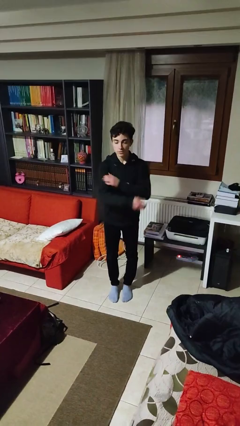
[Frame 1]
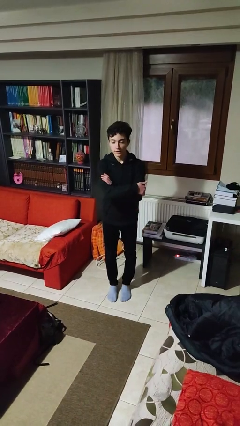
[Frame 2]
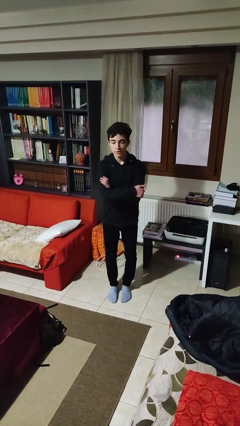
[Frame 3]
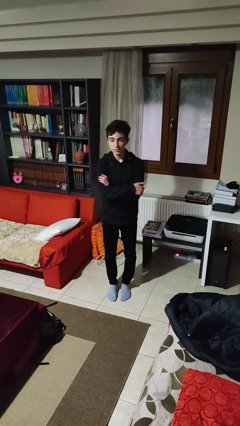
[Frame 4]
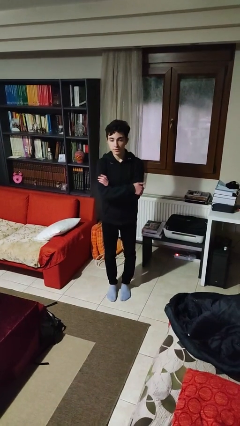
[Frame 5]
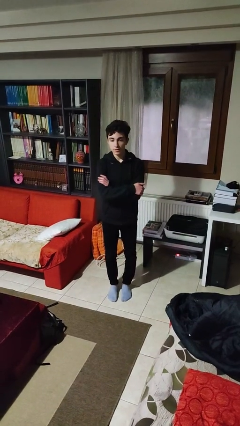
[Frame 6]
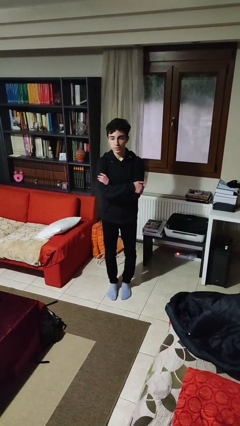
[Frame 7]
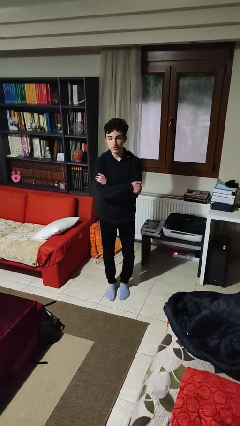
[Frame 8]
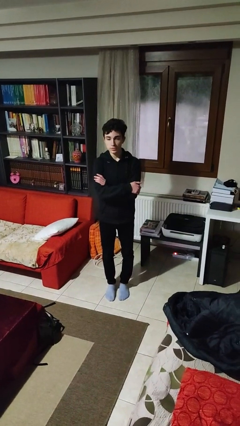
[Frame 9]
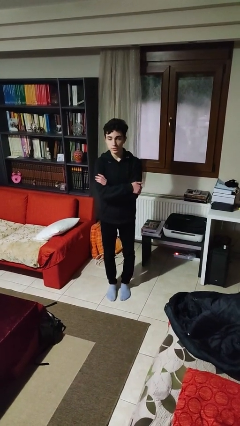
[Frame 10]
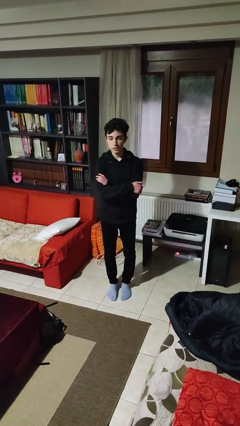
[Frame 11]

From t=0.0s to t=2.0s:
person crosses arms

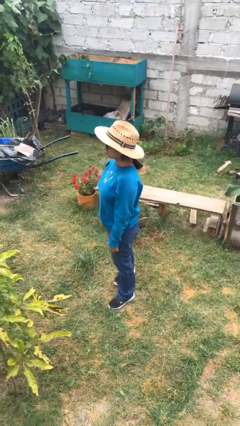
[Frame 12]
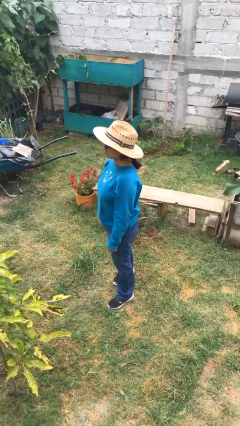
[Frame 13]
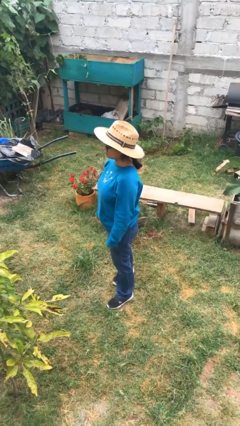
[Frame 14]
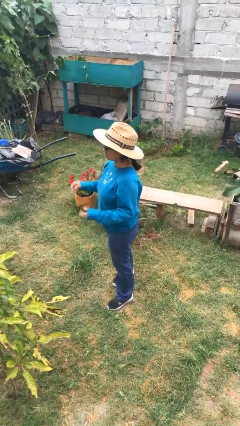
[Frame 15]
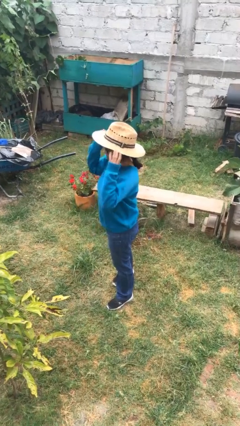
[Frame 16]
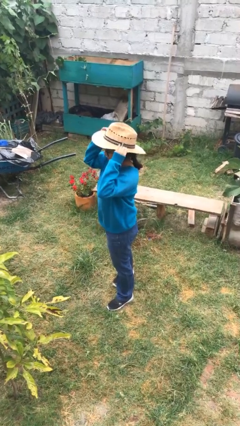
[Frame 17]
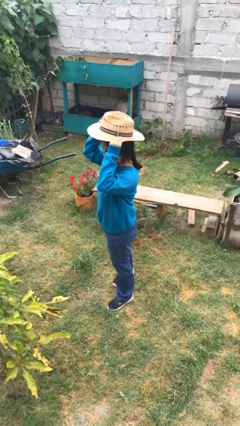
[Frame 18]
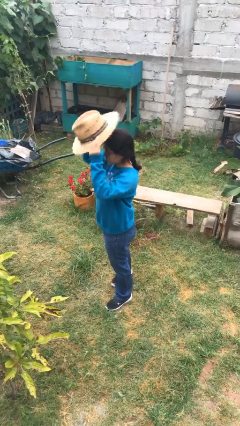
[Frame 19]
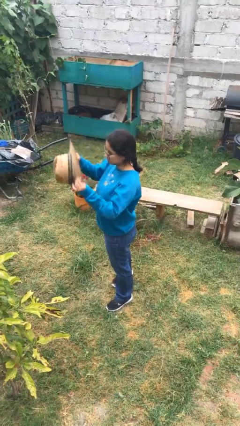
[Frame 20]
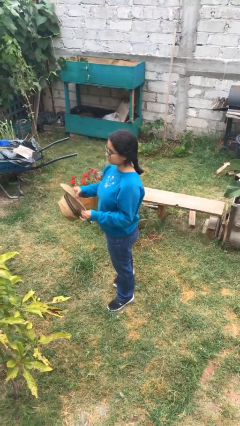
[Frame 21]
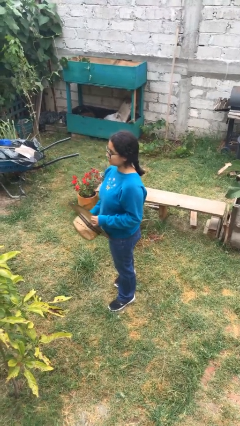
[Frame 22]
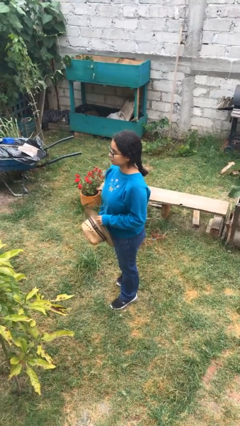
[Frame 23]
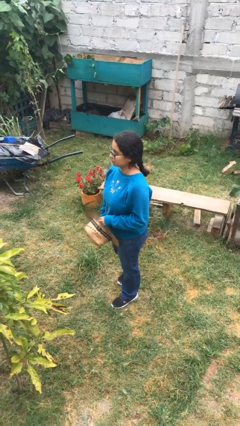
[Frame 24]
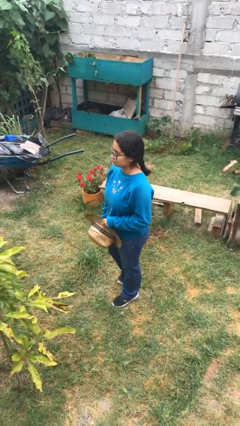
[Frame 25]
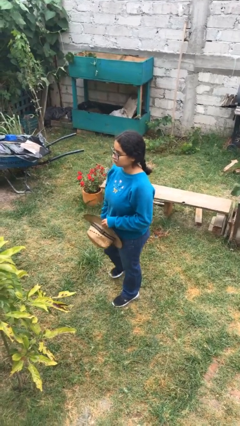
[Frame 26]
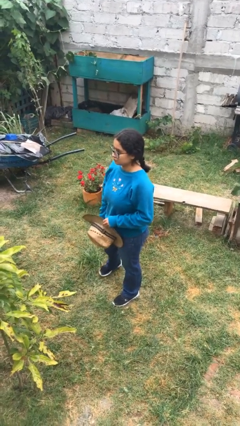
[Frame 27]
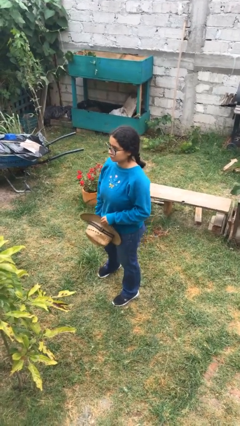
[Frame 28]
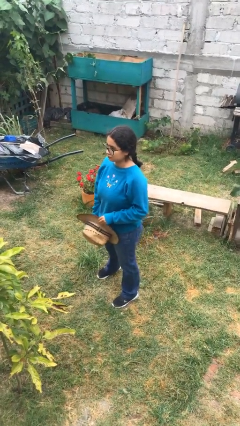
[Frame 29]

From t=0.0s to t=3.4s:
person takes off hat

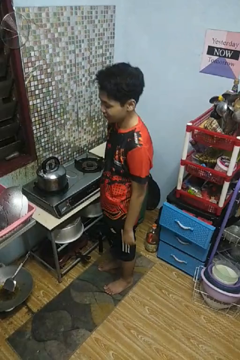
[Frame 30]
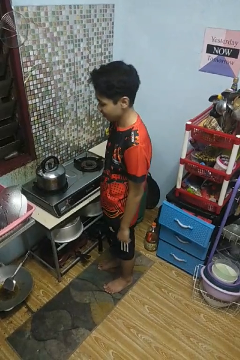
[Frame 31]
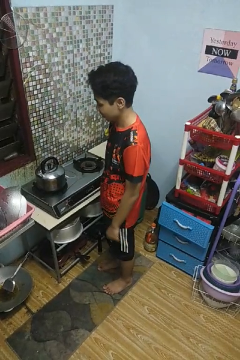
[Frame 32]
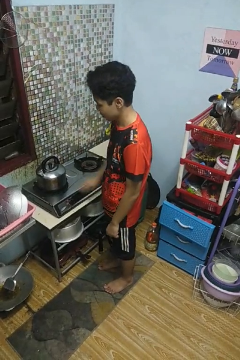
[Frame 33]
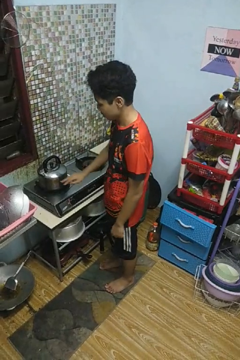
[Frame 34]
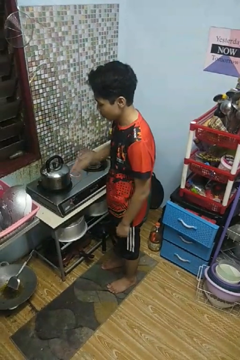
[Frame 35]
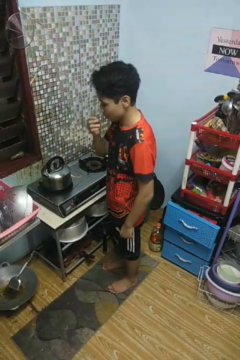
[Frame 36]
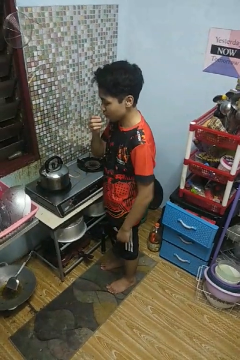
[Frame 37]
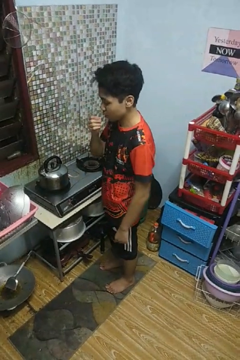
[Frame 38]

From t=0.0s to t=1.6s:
person burns hand

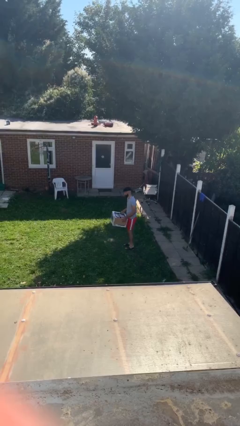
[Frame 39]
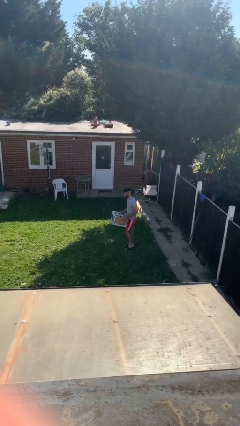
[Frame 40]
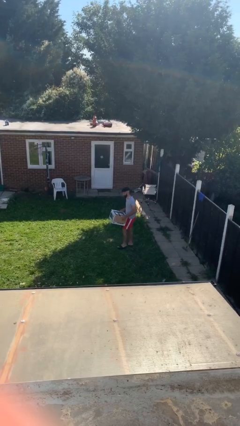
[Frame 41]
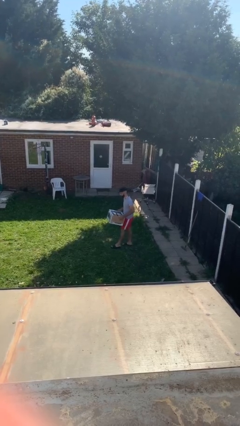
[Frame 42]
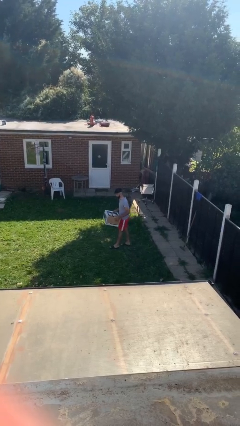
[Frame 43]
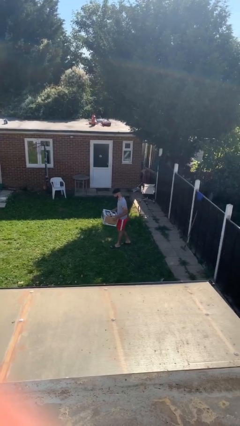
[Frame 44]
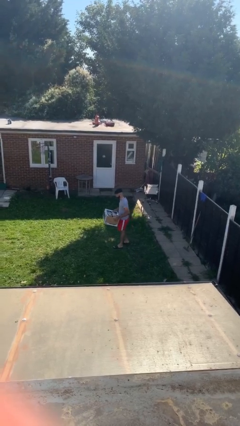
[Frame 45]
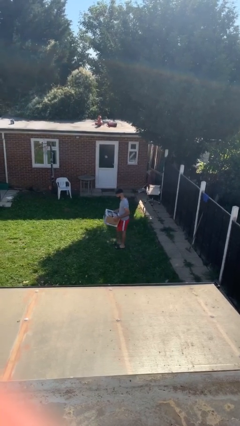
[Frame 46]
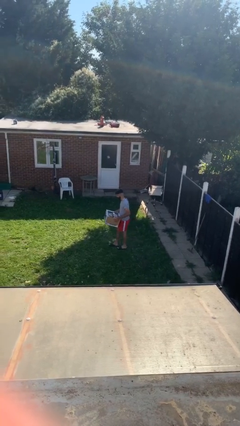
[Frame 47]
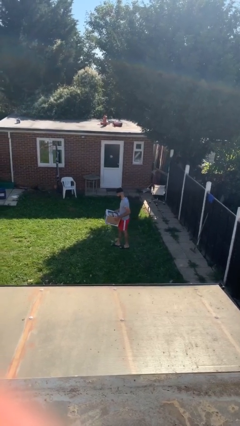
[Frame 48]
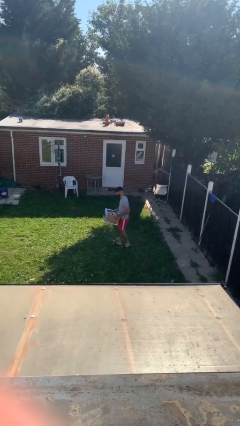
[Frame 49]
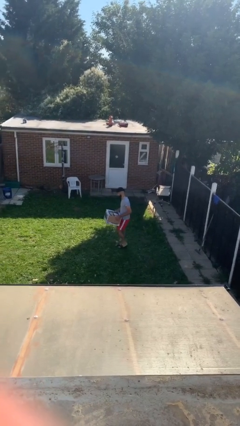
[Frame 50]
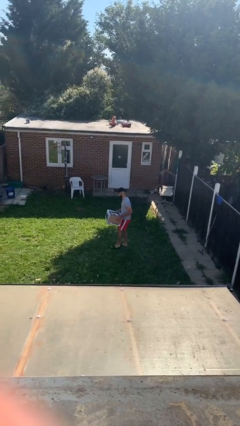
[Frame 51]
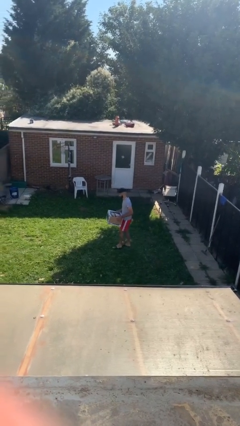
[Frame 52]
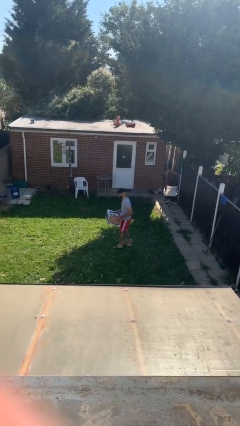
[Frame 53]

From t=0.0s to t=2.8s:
person carries heavy object

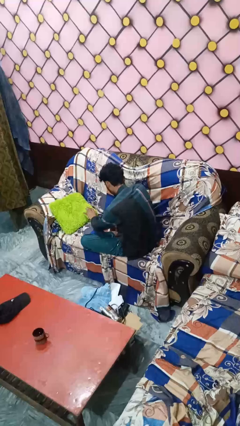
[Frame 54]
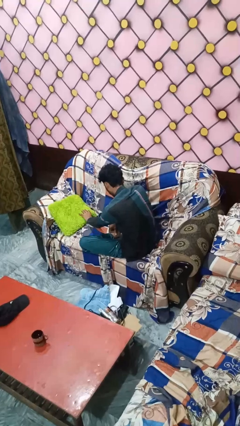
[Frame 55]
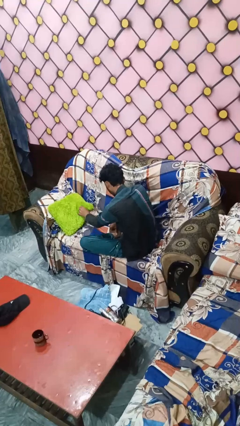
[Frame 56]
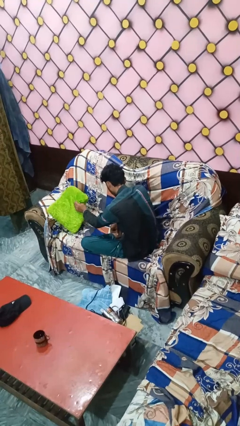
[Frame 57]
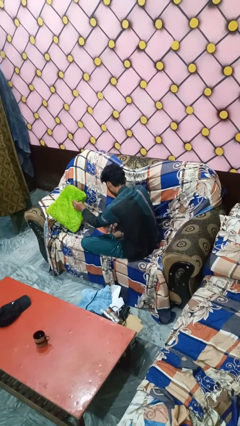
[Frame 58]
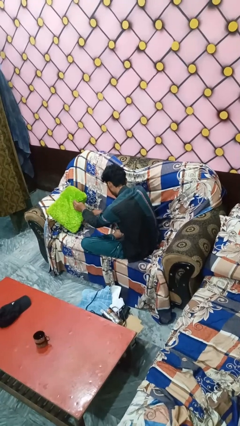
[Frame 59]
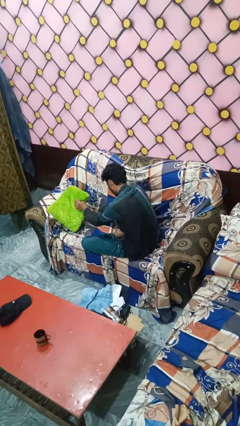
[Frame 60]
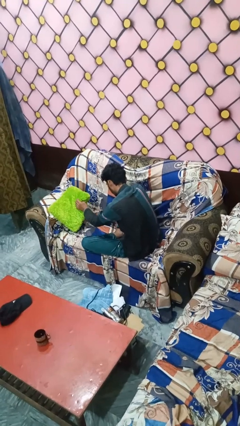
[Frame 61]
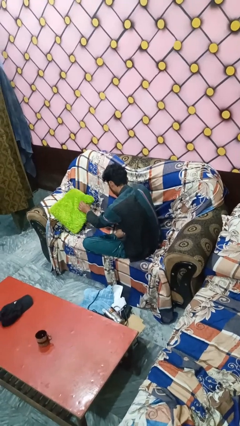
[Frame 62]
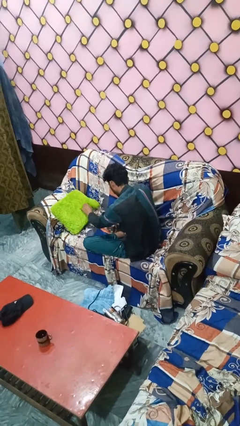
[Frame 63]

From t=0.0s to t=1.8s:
person searches under couch

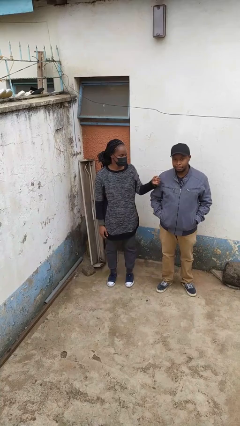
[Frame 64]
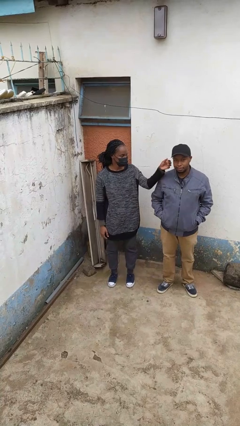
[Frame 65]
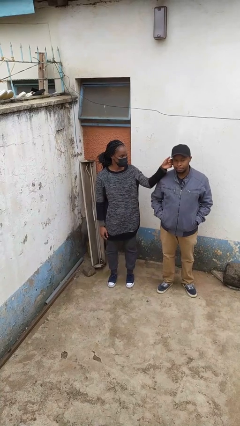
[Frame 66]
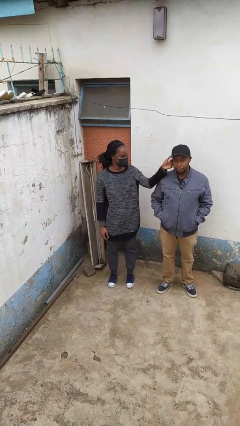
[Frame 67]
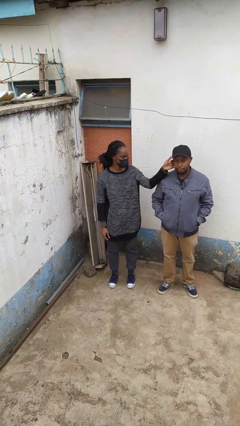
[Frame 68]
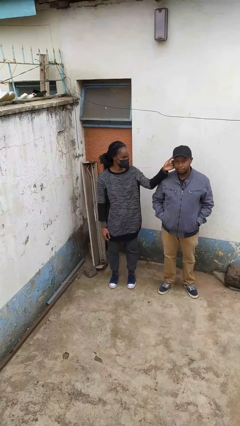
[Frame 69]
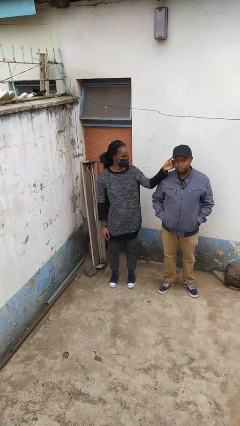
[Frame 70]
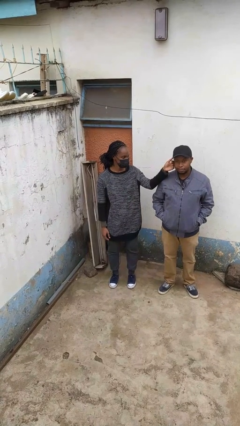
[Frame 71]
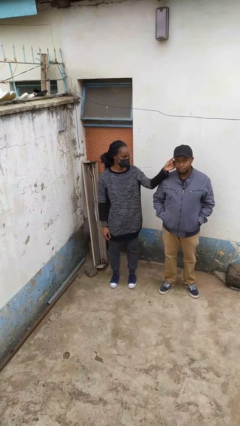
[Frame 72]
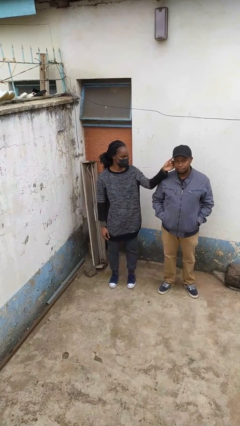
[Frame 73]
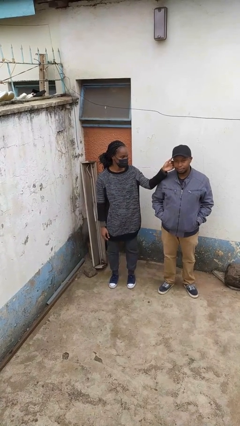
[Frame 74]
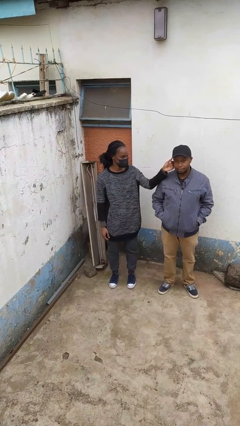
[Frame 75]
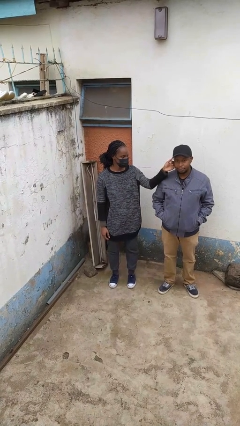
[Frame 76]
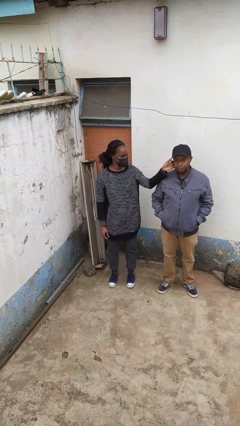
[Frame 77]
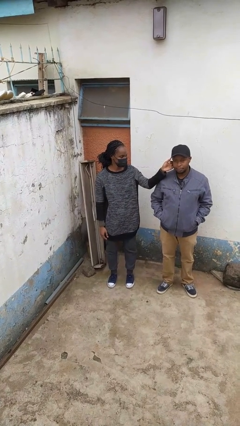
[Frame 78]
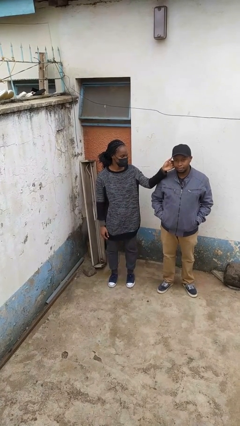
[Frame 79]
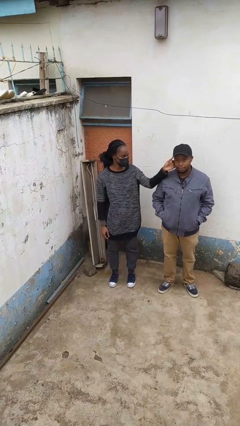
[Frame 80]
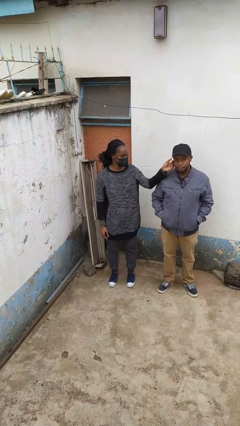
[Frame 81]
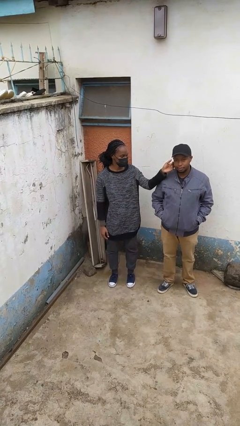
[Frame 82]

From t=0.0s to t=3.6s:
person touches face of person

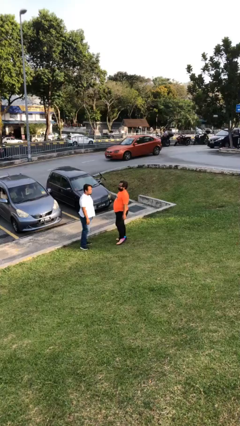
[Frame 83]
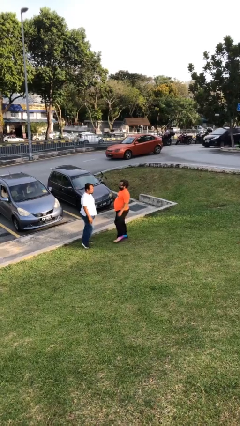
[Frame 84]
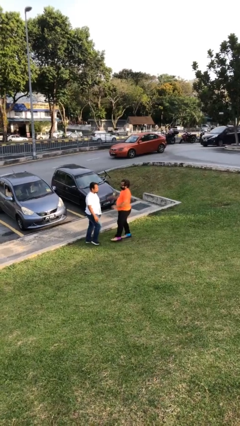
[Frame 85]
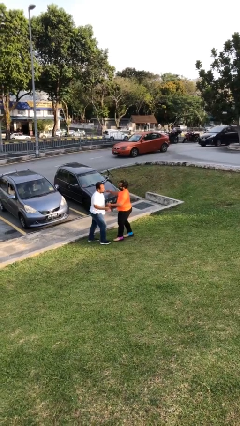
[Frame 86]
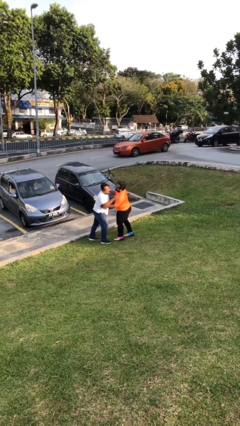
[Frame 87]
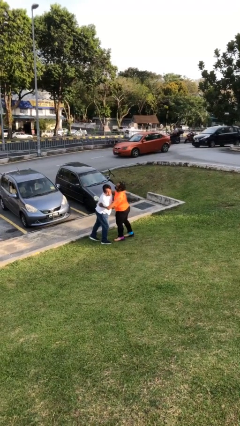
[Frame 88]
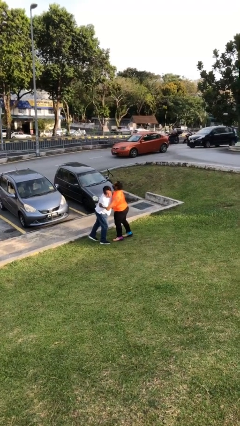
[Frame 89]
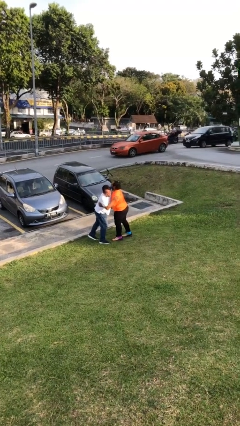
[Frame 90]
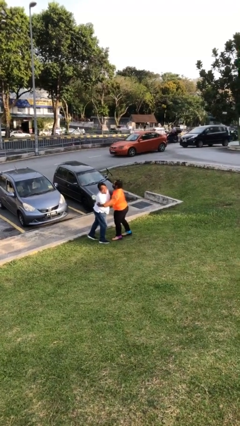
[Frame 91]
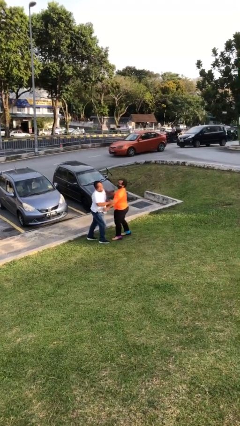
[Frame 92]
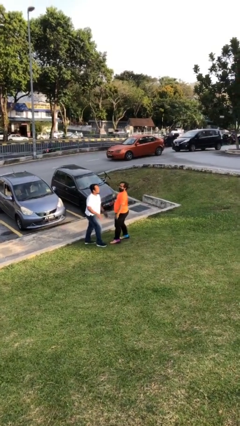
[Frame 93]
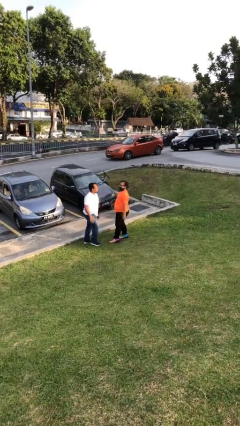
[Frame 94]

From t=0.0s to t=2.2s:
person embraces person

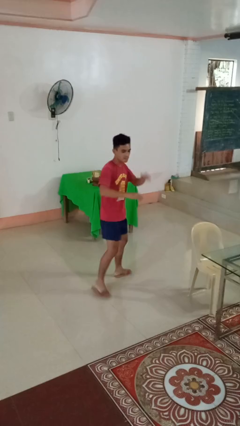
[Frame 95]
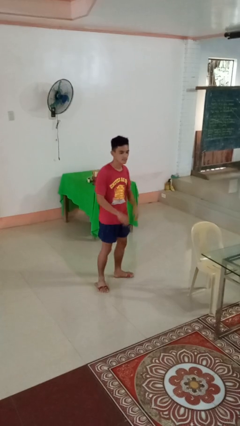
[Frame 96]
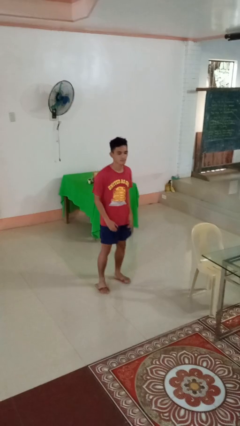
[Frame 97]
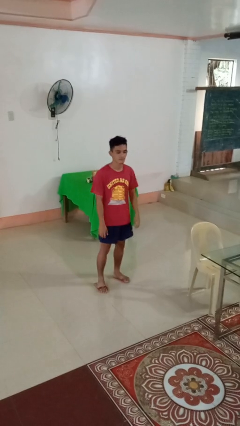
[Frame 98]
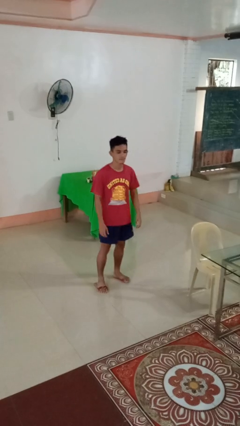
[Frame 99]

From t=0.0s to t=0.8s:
person karate chop
